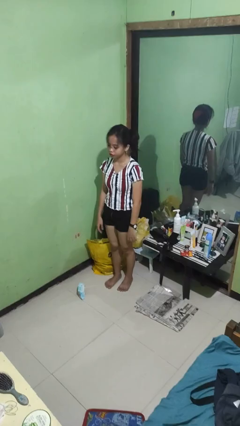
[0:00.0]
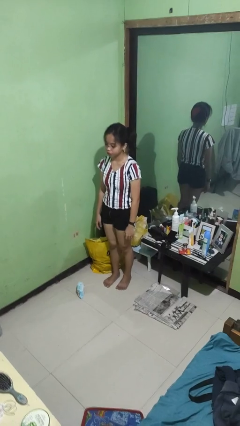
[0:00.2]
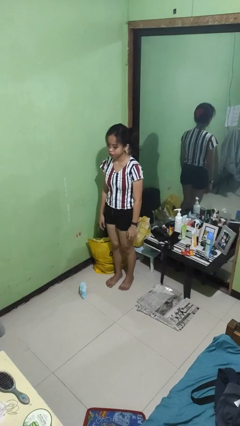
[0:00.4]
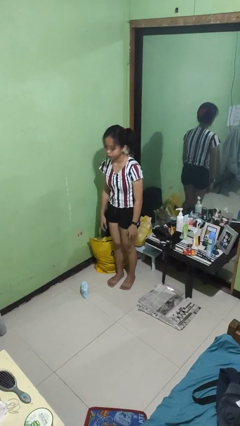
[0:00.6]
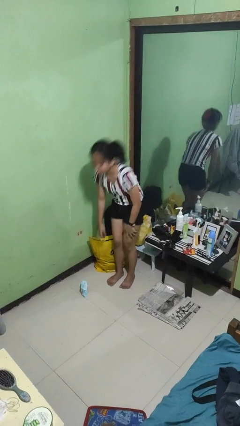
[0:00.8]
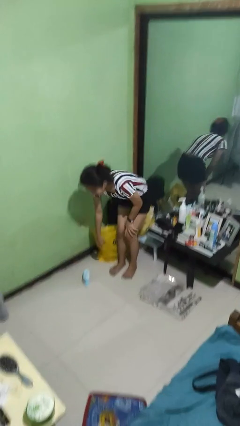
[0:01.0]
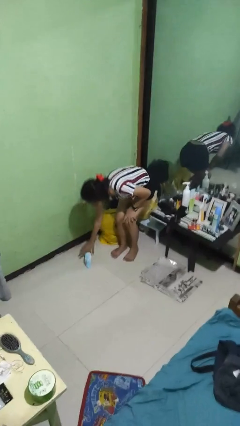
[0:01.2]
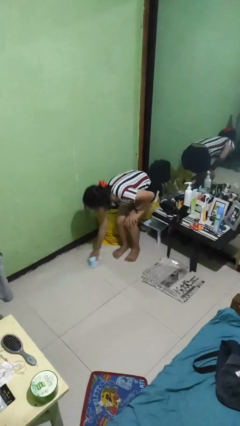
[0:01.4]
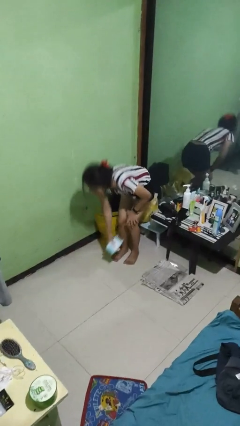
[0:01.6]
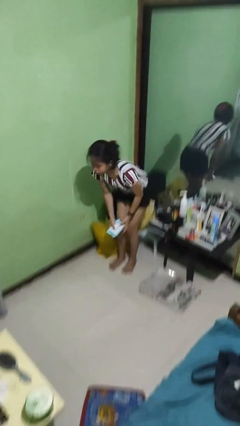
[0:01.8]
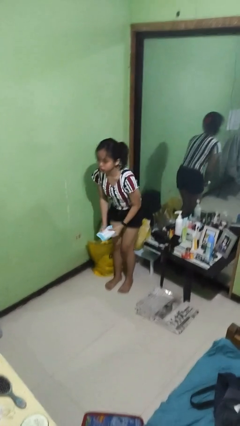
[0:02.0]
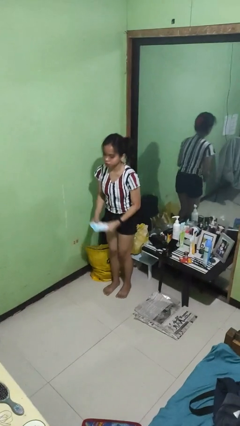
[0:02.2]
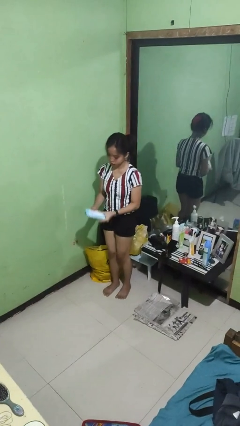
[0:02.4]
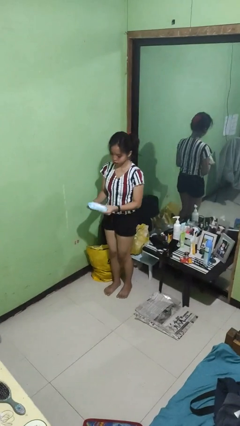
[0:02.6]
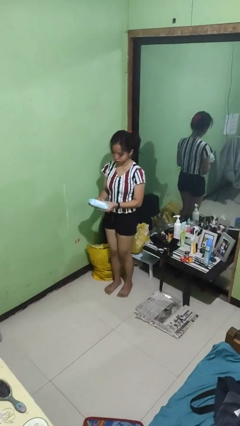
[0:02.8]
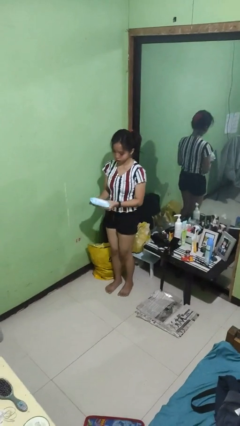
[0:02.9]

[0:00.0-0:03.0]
person picks up object from floor

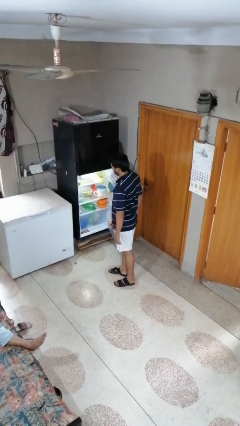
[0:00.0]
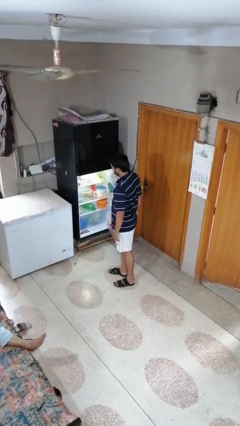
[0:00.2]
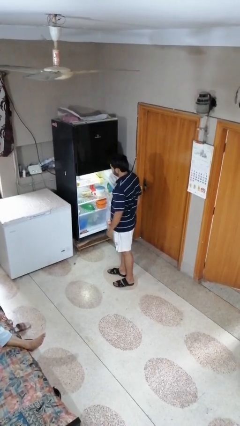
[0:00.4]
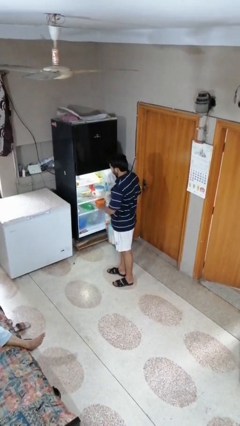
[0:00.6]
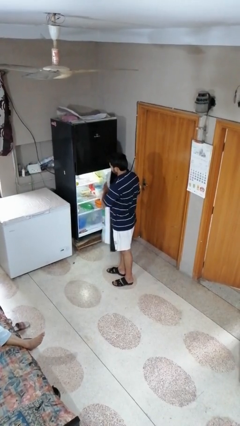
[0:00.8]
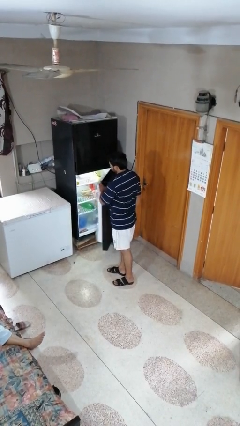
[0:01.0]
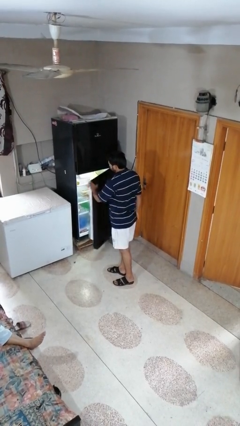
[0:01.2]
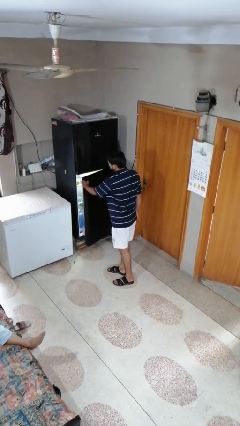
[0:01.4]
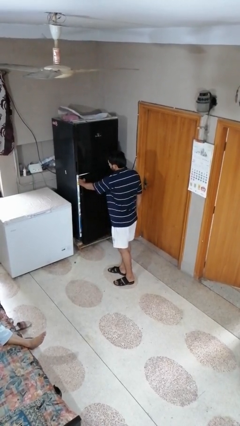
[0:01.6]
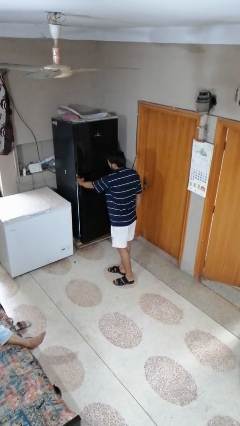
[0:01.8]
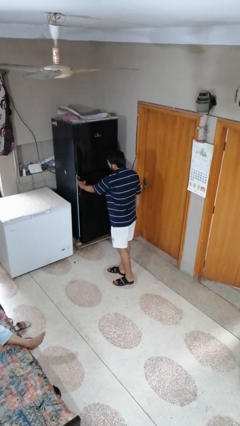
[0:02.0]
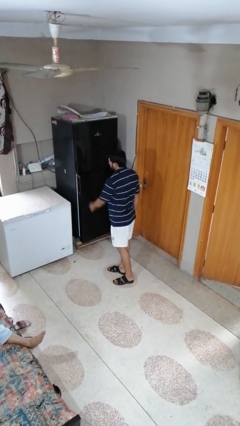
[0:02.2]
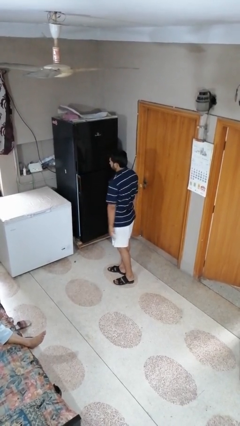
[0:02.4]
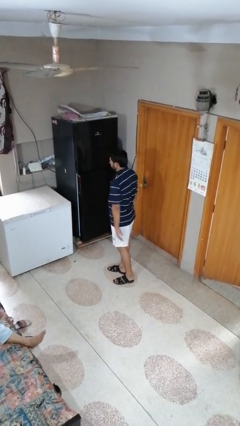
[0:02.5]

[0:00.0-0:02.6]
person closes refrigerator

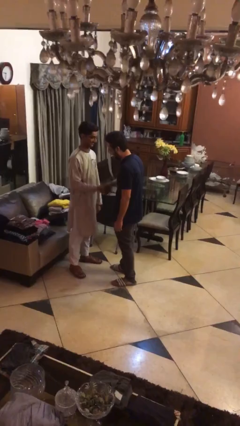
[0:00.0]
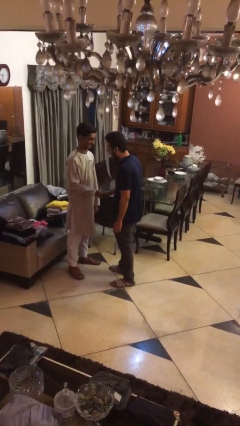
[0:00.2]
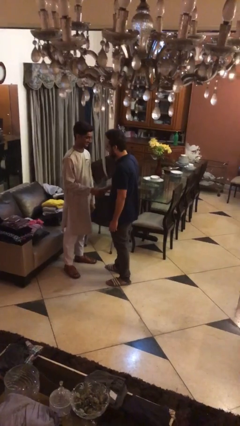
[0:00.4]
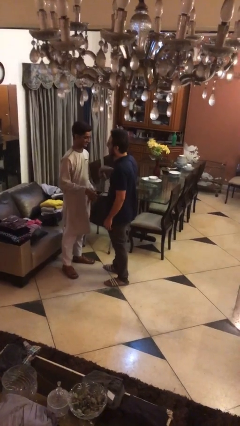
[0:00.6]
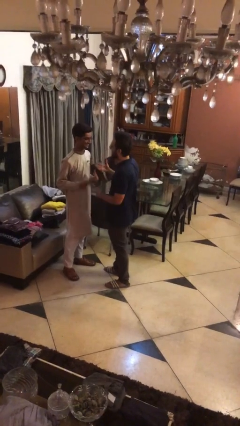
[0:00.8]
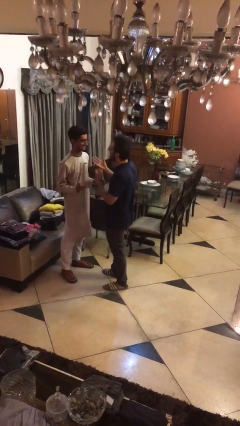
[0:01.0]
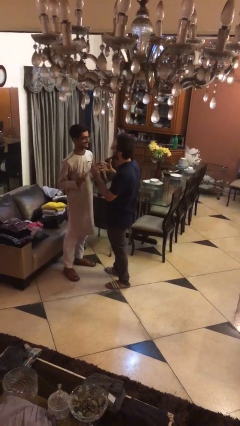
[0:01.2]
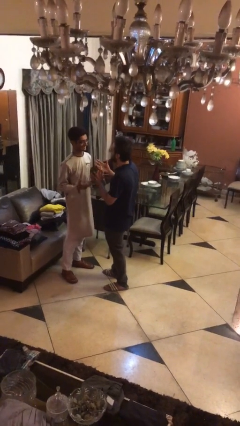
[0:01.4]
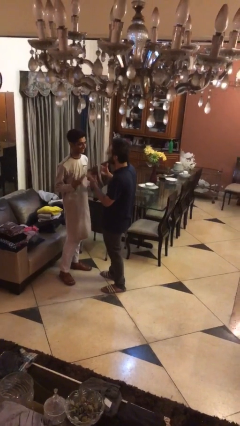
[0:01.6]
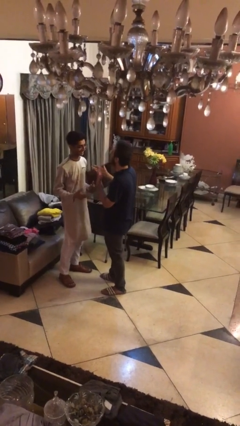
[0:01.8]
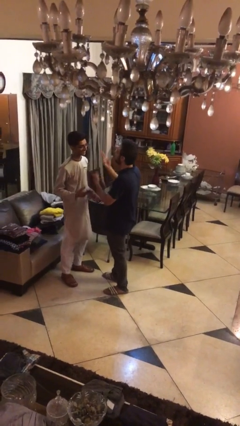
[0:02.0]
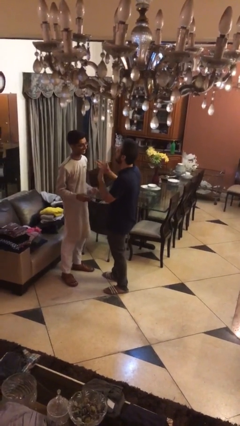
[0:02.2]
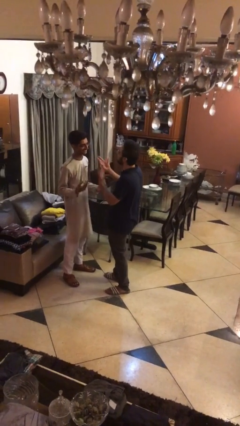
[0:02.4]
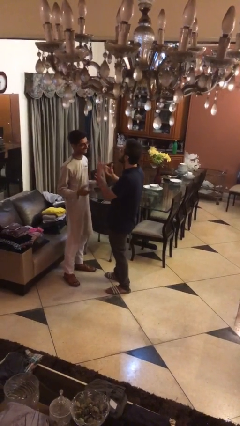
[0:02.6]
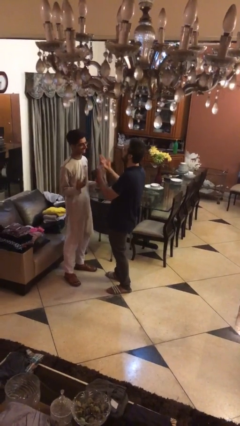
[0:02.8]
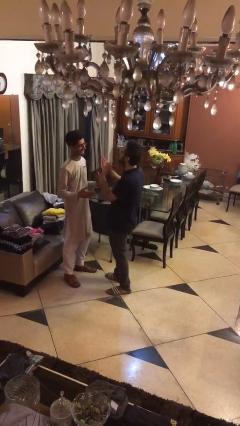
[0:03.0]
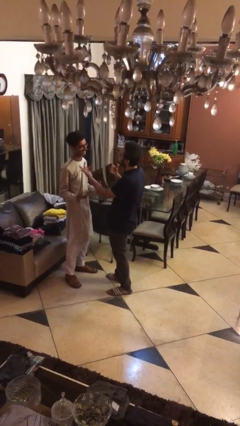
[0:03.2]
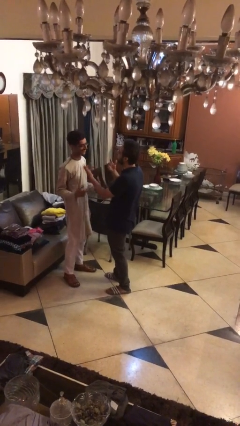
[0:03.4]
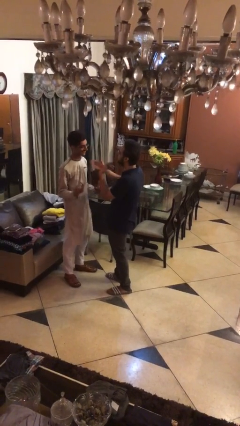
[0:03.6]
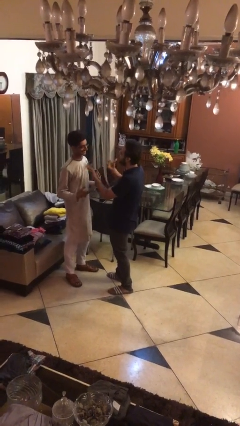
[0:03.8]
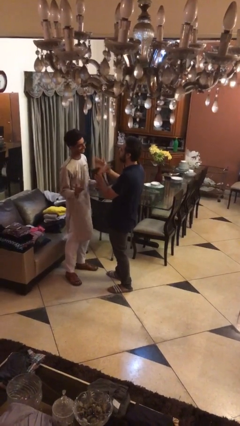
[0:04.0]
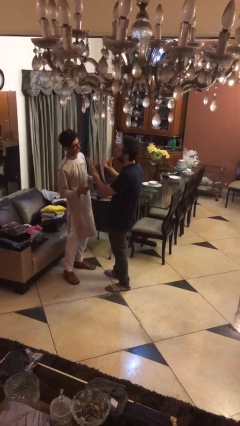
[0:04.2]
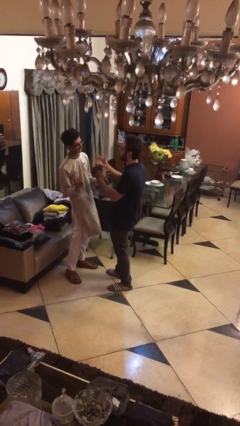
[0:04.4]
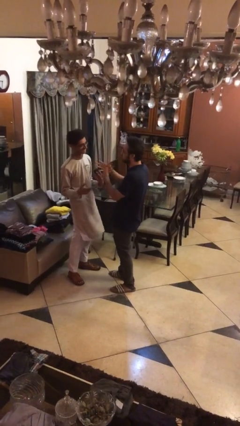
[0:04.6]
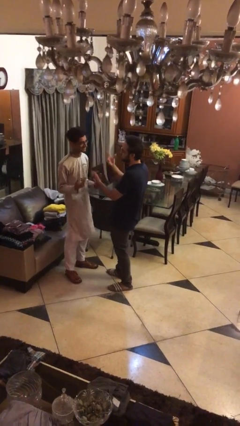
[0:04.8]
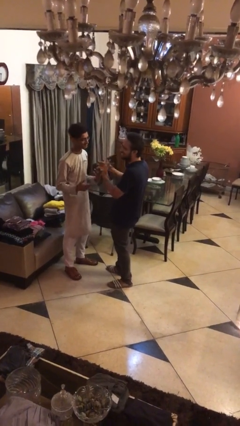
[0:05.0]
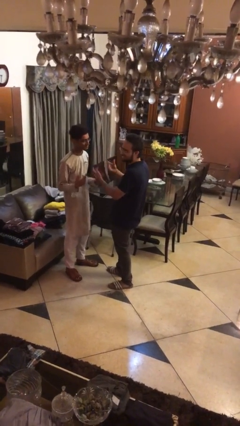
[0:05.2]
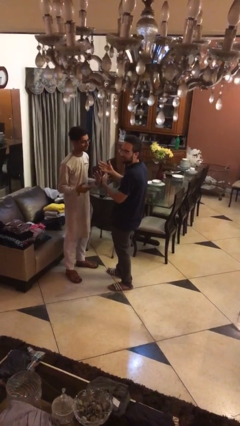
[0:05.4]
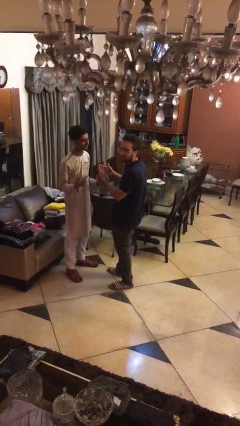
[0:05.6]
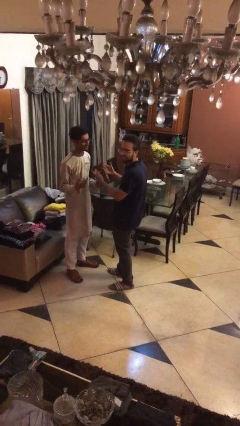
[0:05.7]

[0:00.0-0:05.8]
person talks to person

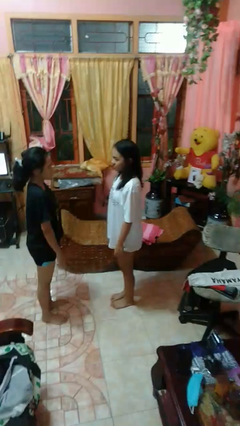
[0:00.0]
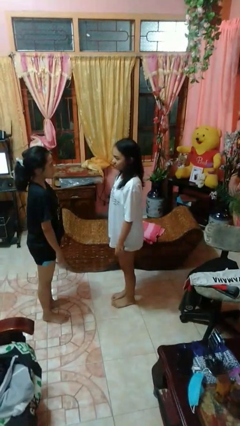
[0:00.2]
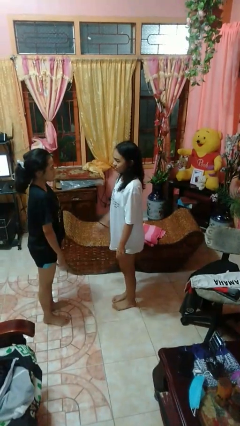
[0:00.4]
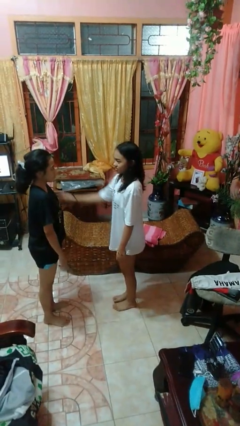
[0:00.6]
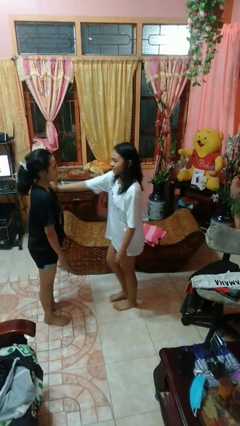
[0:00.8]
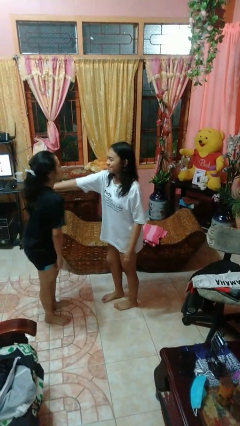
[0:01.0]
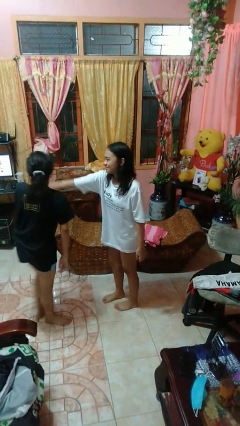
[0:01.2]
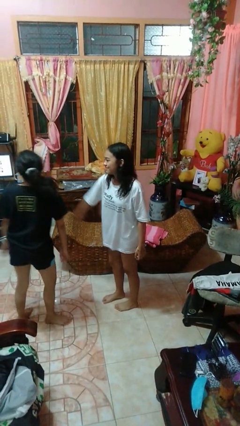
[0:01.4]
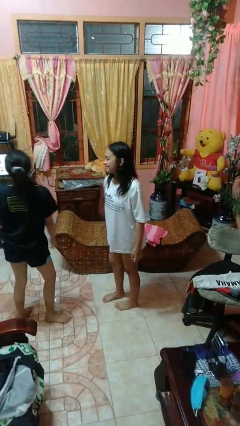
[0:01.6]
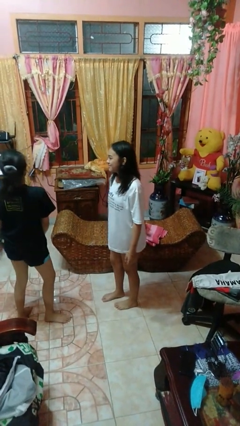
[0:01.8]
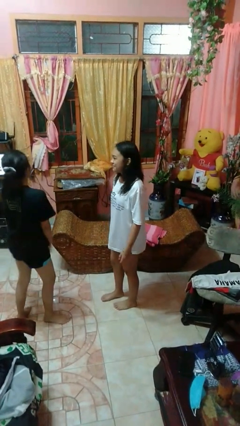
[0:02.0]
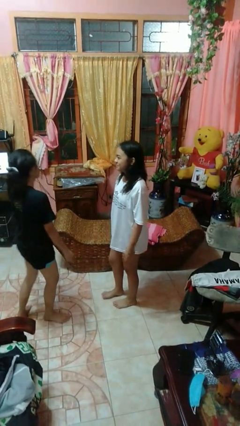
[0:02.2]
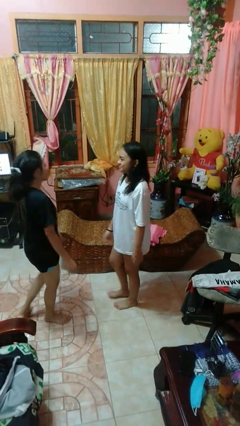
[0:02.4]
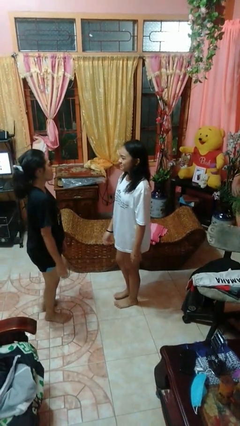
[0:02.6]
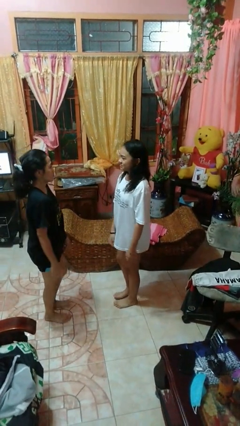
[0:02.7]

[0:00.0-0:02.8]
person shoves person

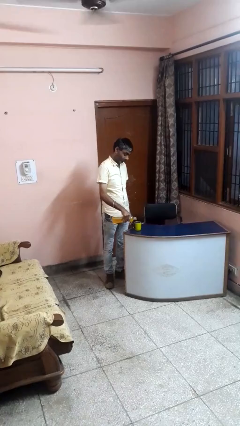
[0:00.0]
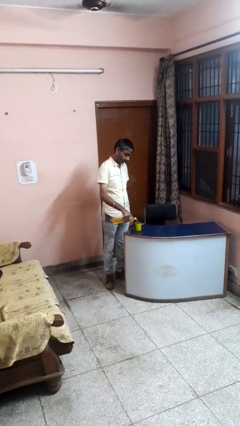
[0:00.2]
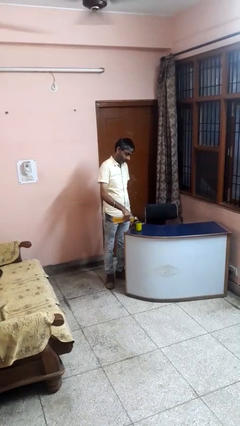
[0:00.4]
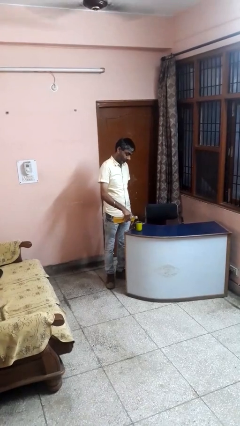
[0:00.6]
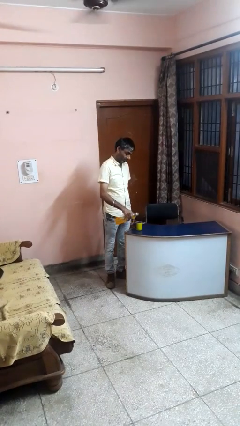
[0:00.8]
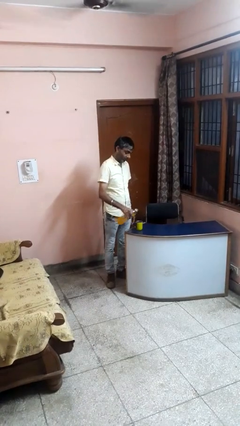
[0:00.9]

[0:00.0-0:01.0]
person pours liquid into cup

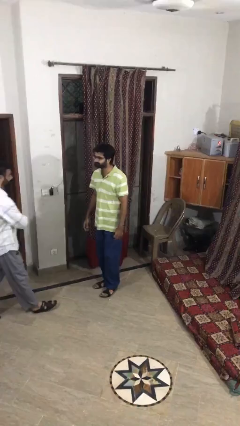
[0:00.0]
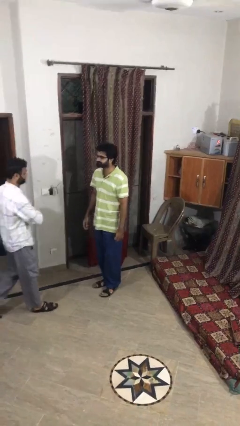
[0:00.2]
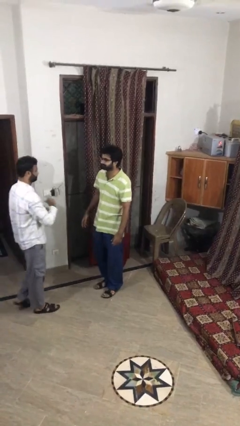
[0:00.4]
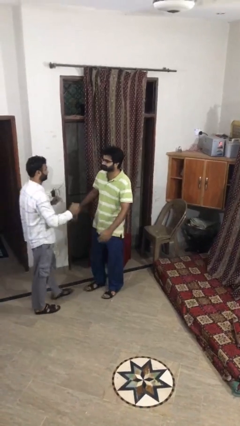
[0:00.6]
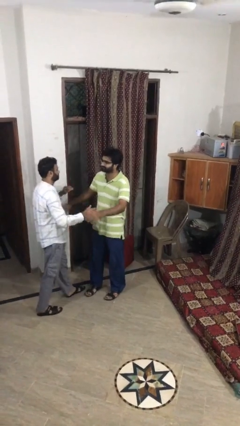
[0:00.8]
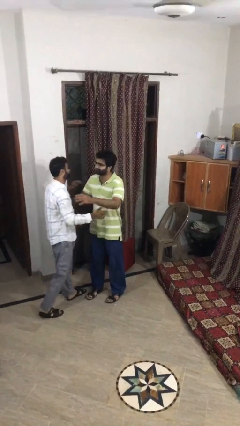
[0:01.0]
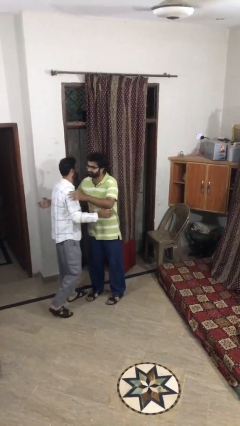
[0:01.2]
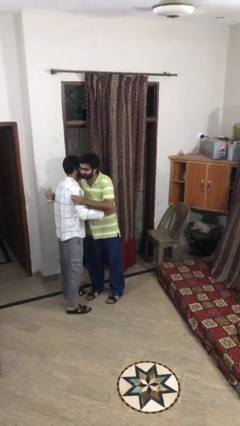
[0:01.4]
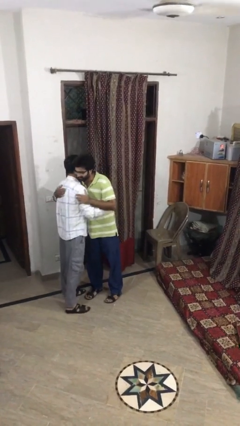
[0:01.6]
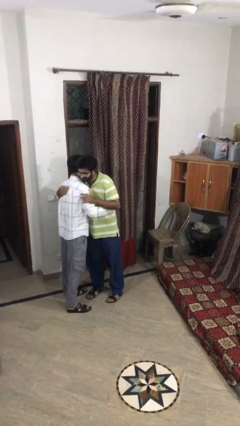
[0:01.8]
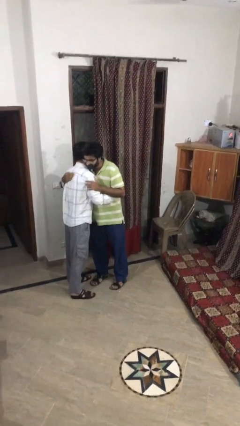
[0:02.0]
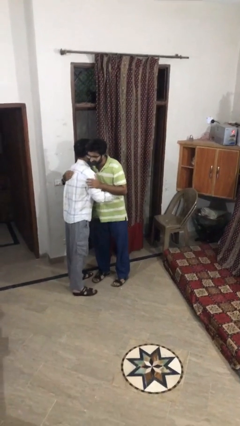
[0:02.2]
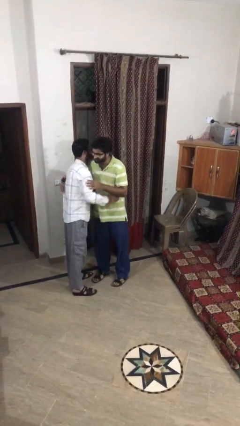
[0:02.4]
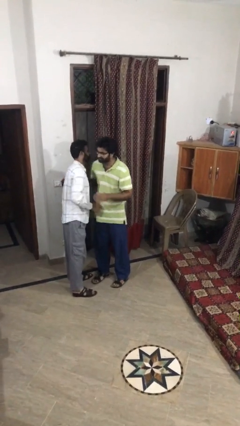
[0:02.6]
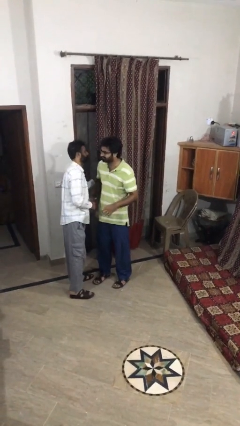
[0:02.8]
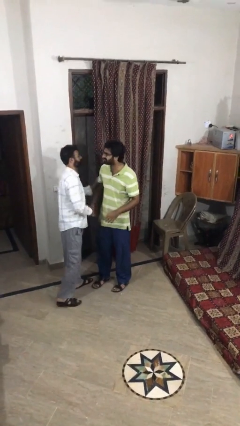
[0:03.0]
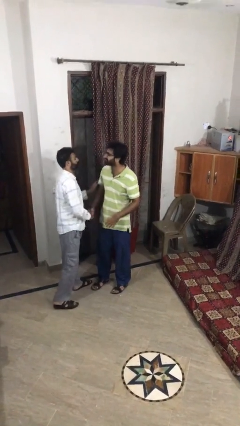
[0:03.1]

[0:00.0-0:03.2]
person embraces person
